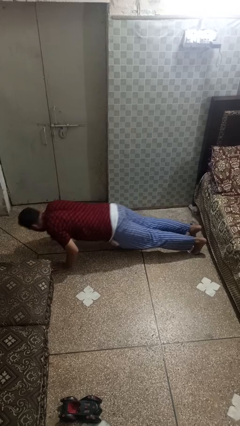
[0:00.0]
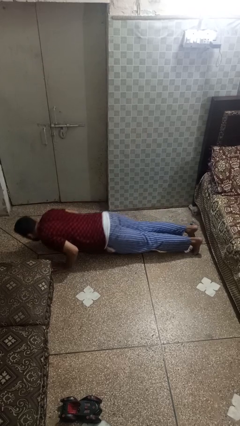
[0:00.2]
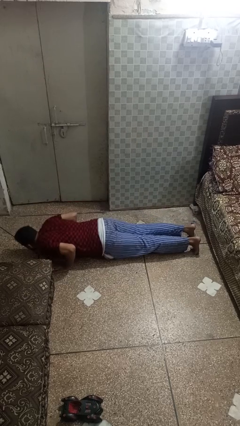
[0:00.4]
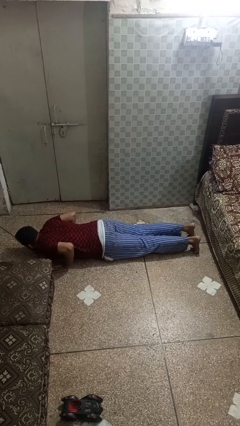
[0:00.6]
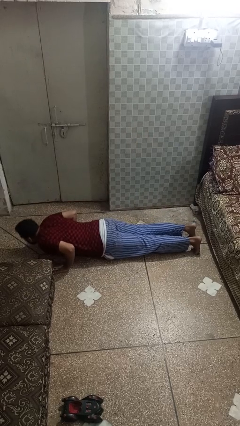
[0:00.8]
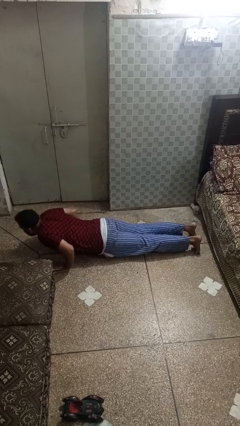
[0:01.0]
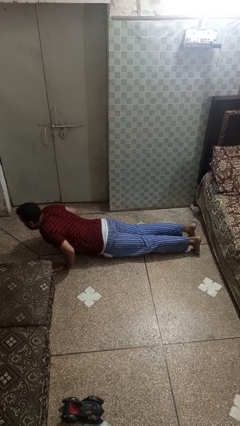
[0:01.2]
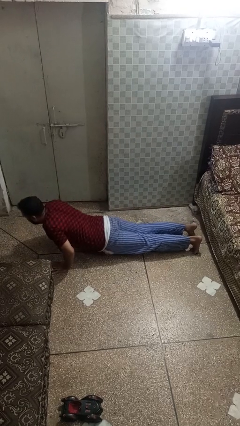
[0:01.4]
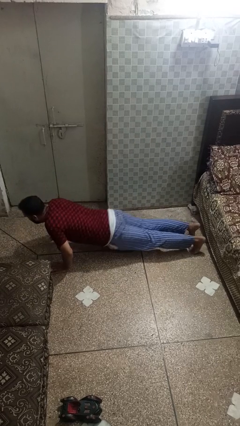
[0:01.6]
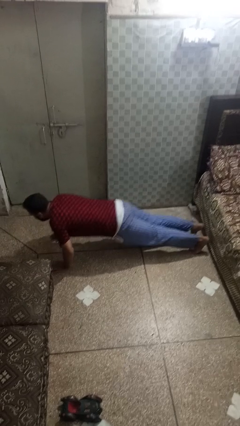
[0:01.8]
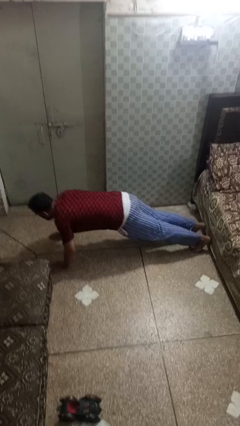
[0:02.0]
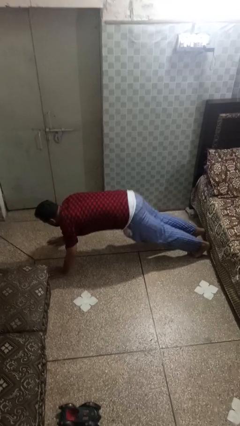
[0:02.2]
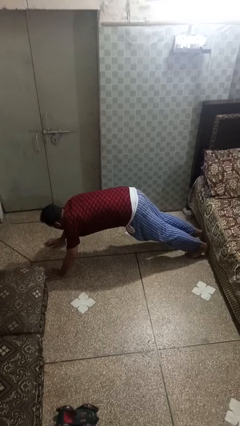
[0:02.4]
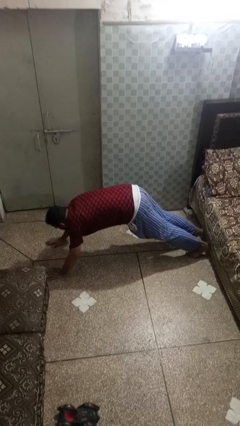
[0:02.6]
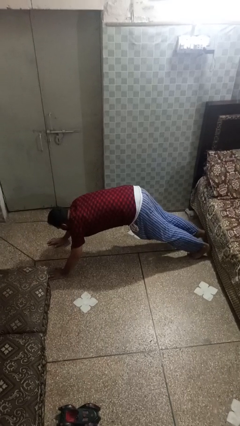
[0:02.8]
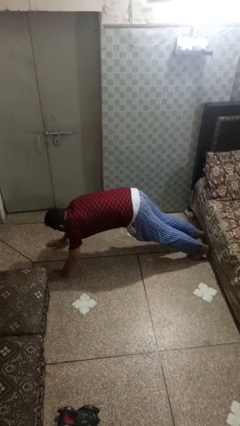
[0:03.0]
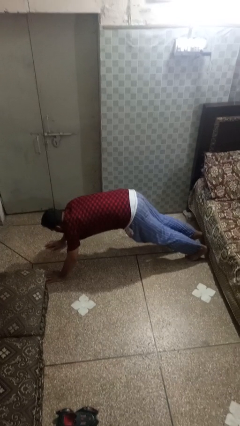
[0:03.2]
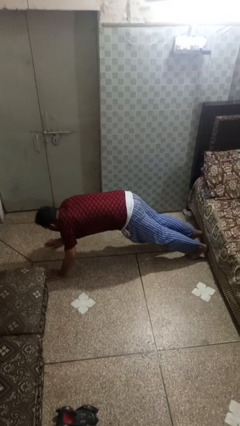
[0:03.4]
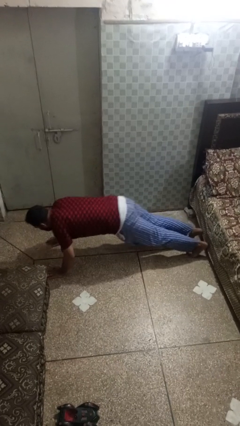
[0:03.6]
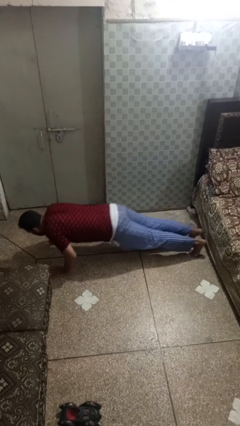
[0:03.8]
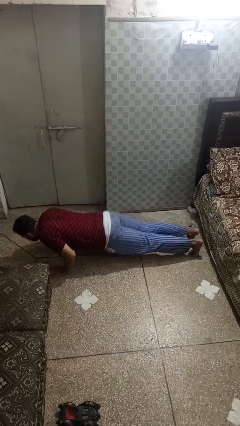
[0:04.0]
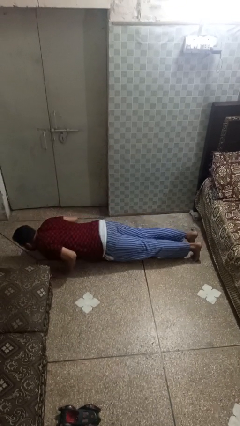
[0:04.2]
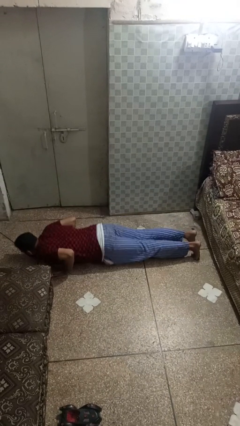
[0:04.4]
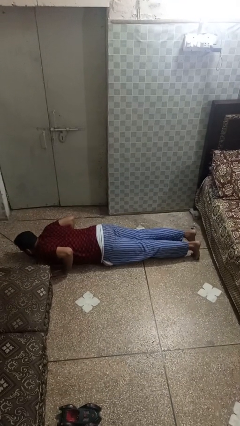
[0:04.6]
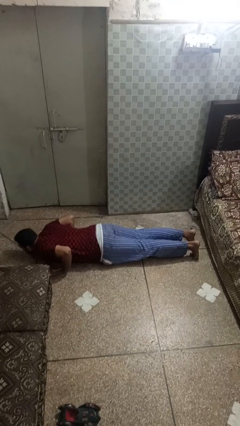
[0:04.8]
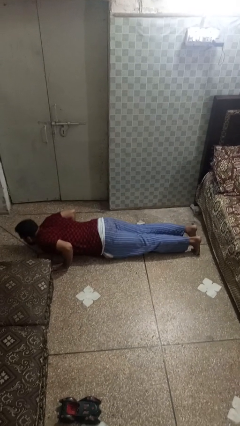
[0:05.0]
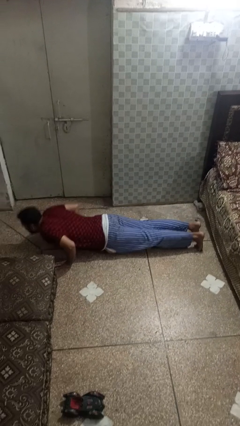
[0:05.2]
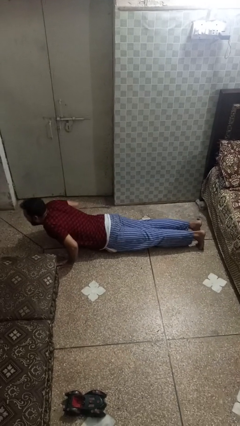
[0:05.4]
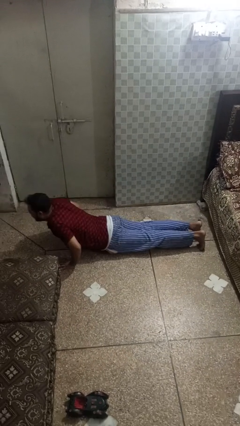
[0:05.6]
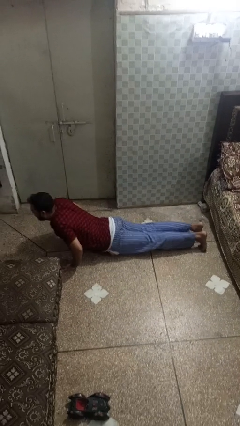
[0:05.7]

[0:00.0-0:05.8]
person exercises with pushup

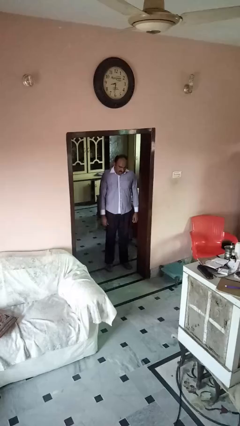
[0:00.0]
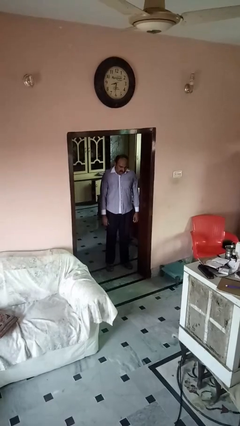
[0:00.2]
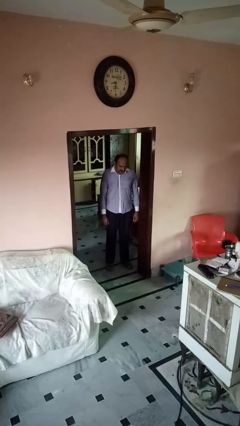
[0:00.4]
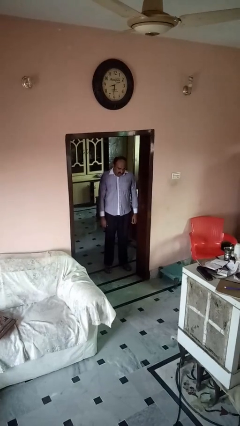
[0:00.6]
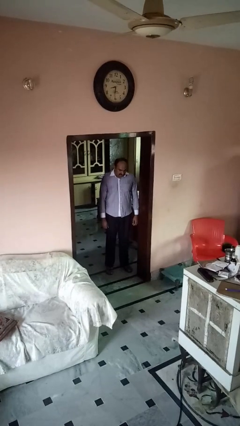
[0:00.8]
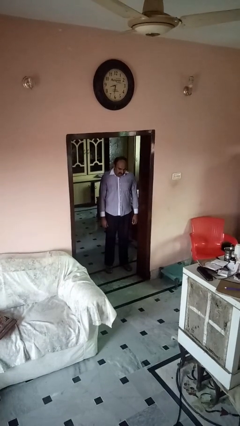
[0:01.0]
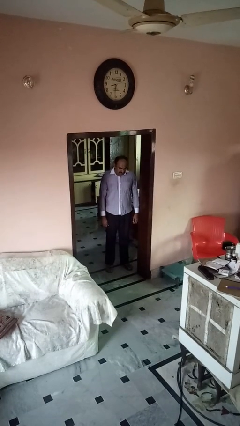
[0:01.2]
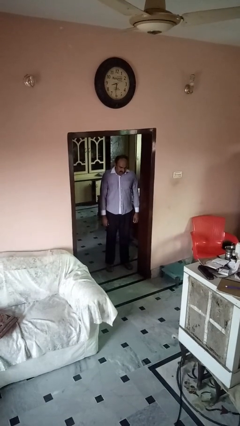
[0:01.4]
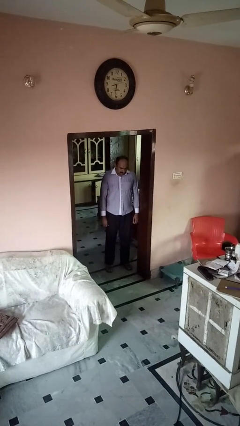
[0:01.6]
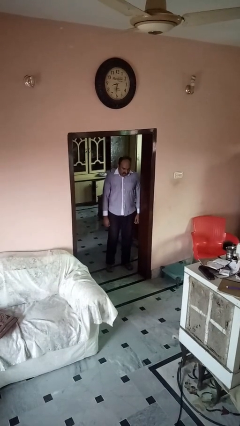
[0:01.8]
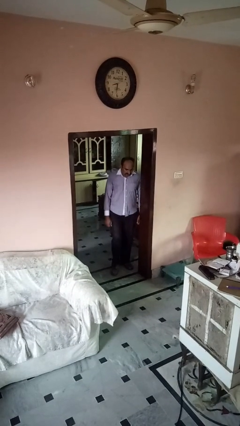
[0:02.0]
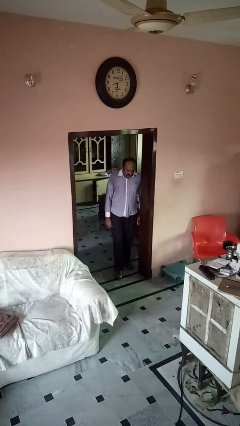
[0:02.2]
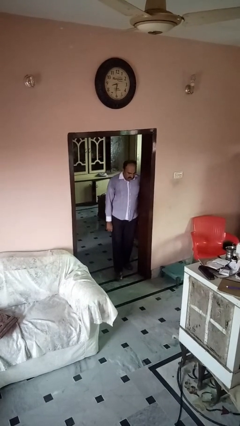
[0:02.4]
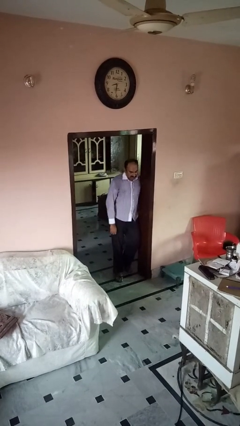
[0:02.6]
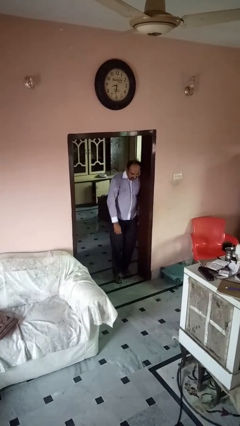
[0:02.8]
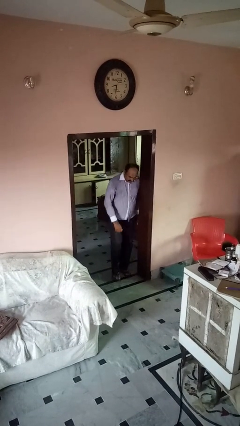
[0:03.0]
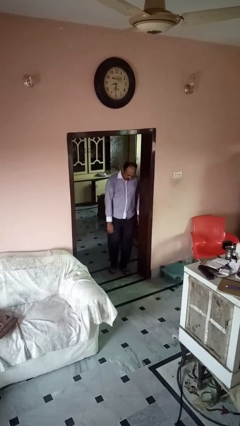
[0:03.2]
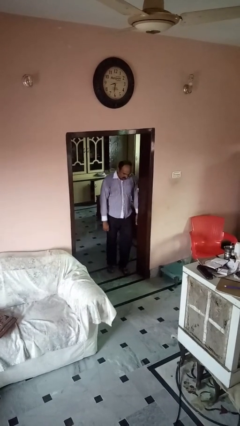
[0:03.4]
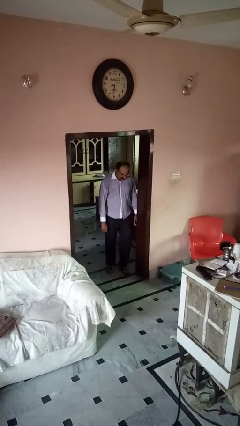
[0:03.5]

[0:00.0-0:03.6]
person bumps into wall

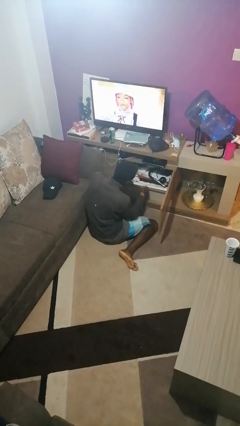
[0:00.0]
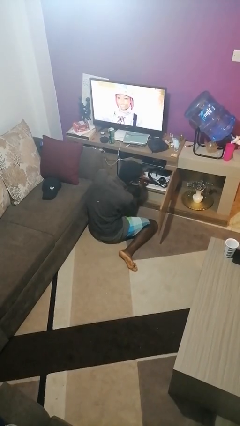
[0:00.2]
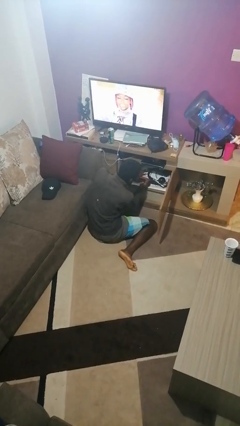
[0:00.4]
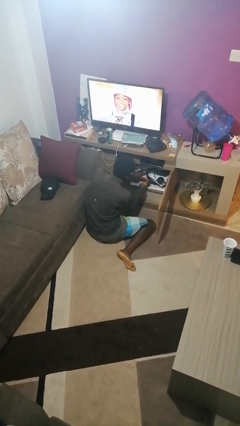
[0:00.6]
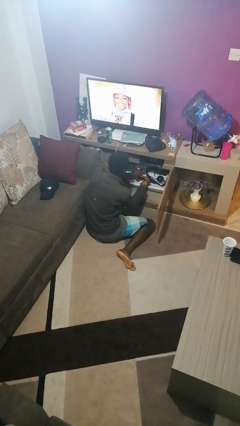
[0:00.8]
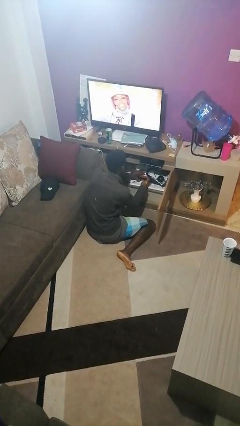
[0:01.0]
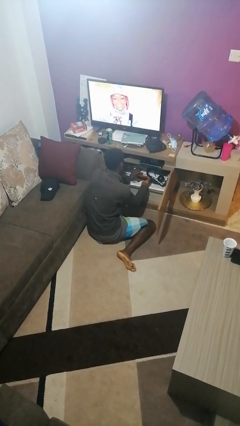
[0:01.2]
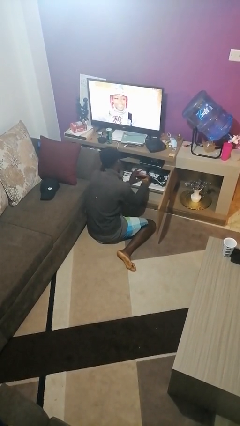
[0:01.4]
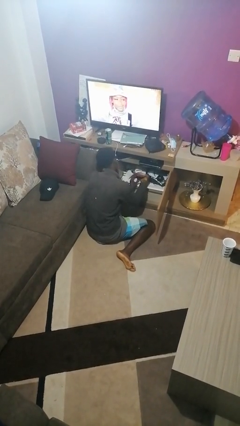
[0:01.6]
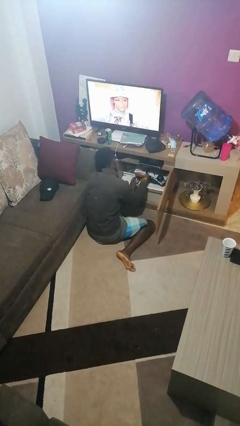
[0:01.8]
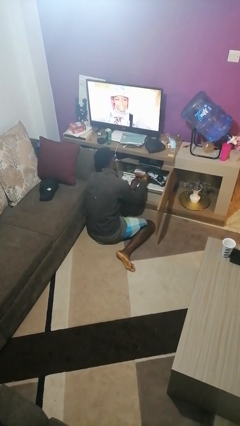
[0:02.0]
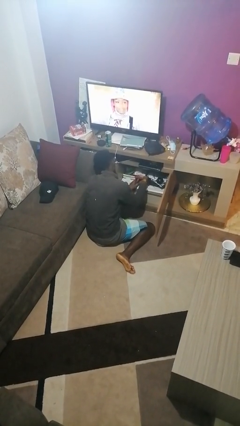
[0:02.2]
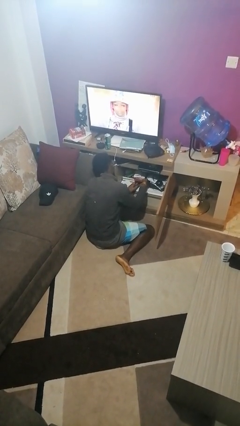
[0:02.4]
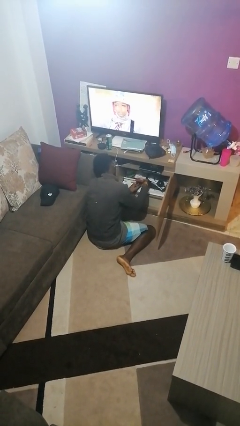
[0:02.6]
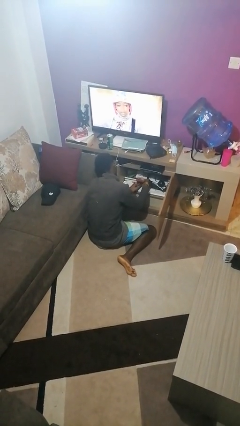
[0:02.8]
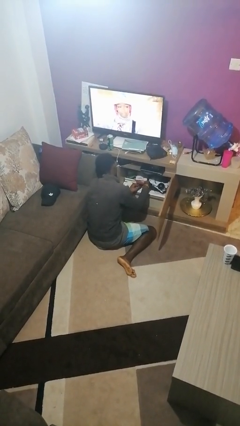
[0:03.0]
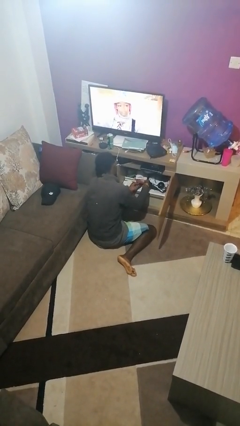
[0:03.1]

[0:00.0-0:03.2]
person searches in cabinet

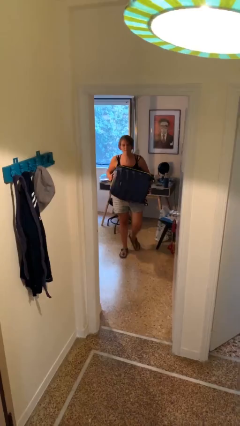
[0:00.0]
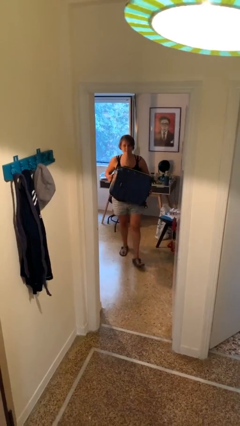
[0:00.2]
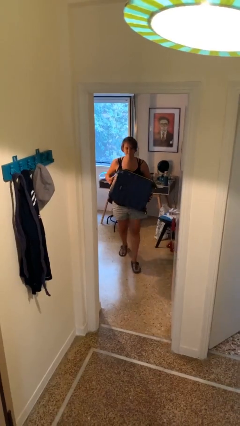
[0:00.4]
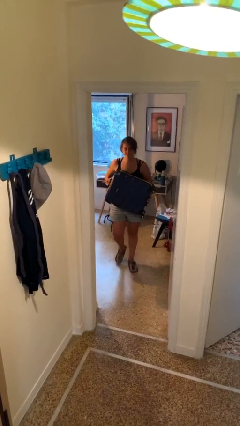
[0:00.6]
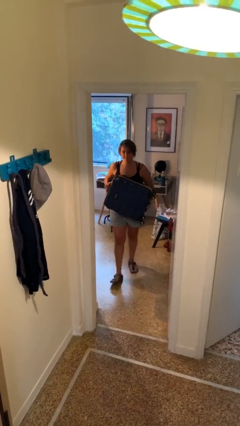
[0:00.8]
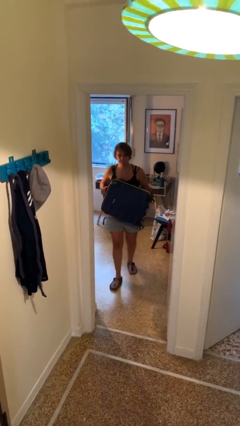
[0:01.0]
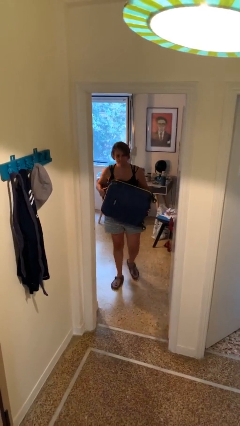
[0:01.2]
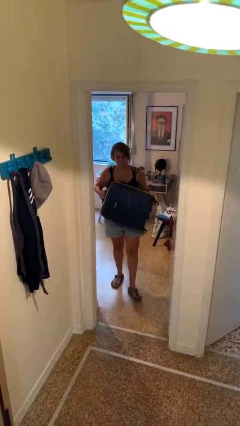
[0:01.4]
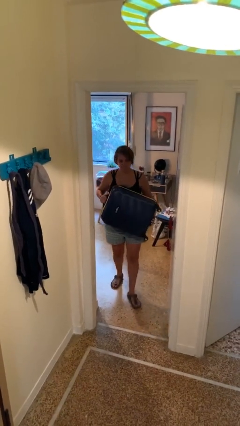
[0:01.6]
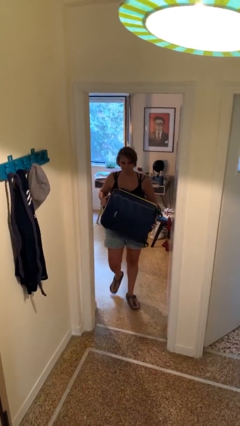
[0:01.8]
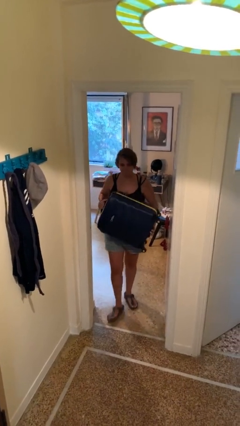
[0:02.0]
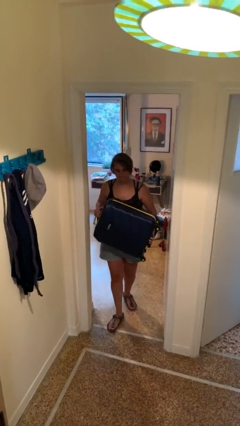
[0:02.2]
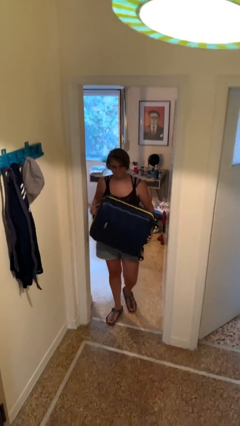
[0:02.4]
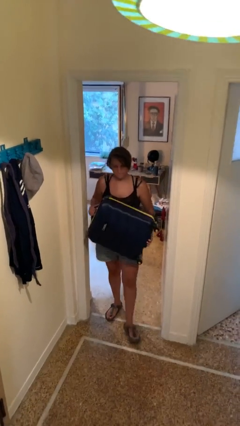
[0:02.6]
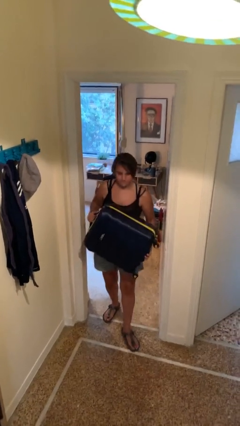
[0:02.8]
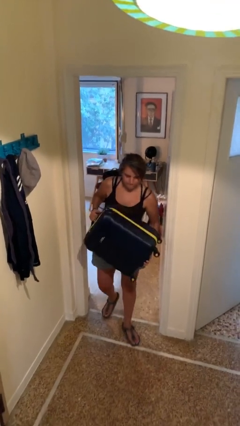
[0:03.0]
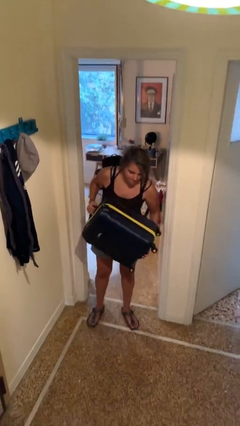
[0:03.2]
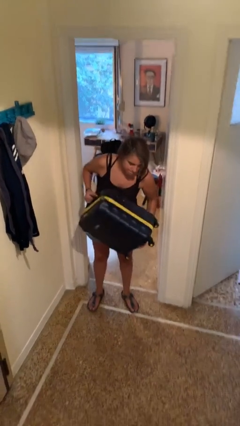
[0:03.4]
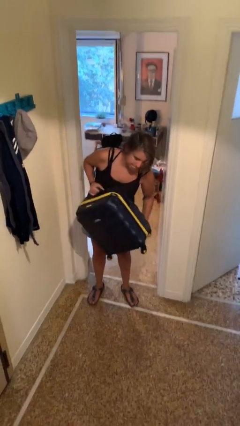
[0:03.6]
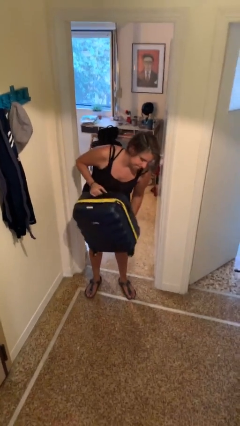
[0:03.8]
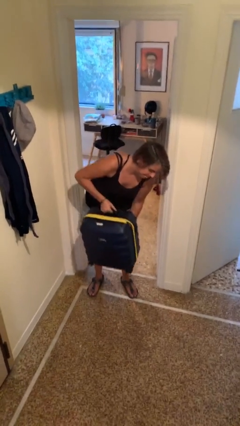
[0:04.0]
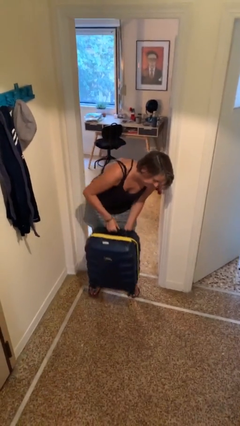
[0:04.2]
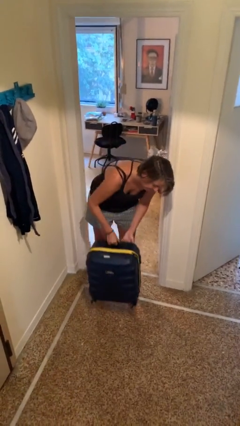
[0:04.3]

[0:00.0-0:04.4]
person carries heavy object

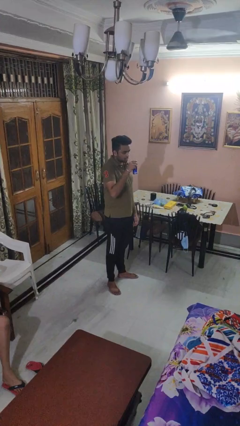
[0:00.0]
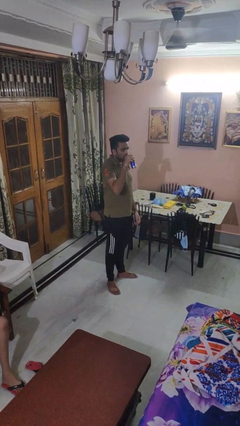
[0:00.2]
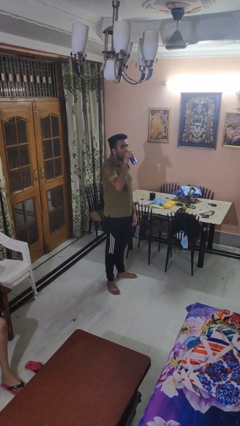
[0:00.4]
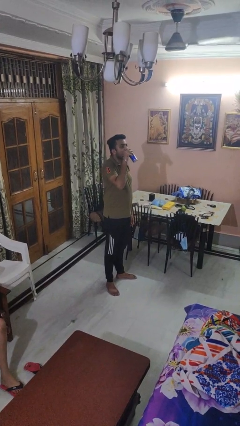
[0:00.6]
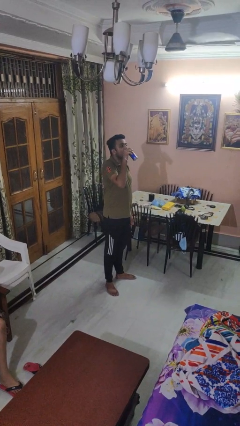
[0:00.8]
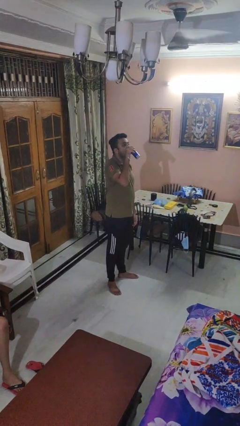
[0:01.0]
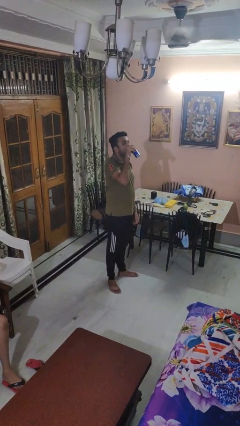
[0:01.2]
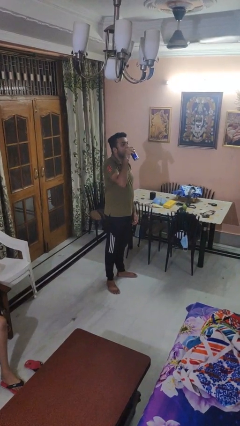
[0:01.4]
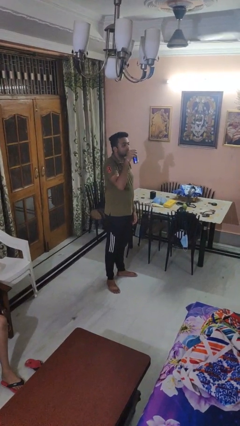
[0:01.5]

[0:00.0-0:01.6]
person drinks from beverage can
